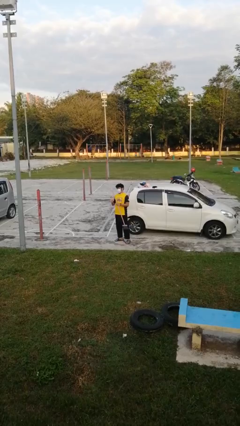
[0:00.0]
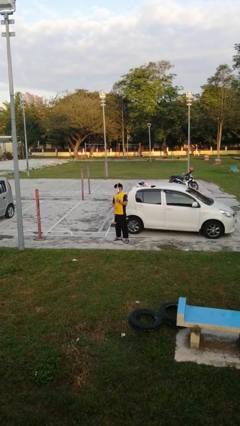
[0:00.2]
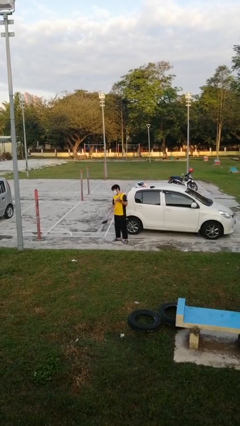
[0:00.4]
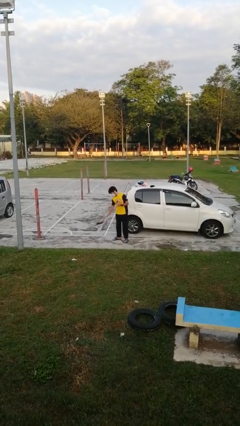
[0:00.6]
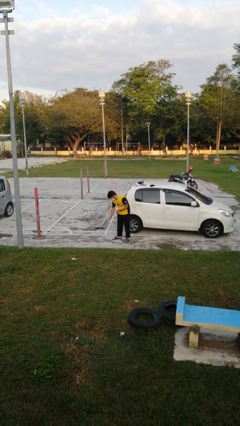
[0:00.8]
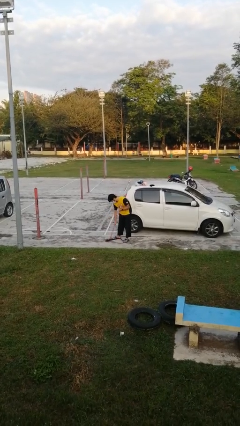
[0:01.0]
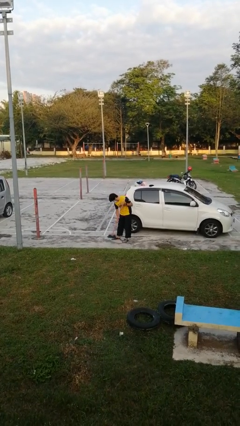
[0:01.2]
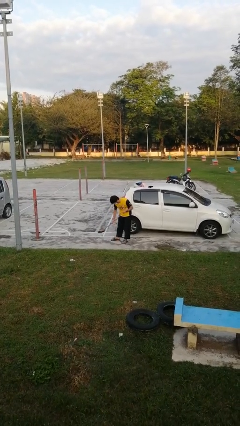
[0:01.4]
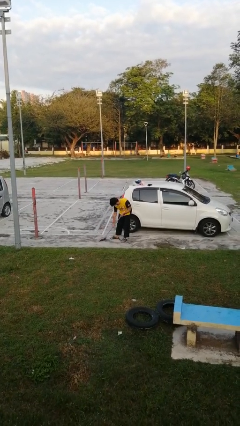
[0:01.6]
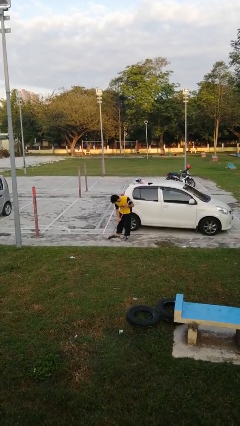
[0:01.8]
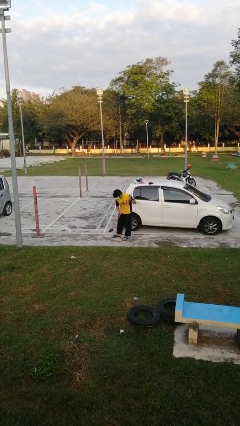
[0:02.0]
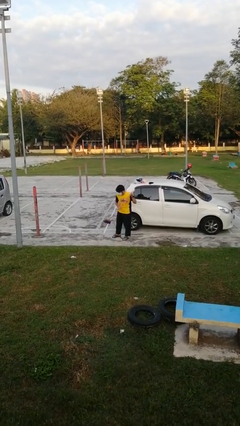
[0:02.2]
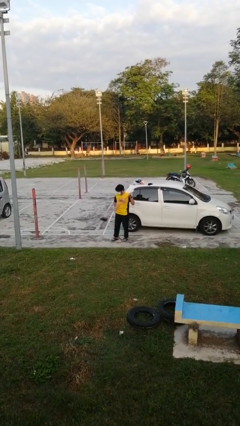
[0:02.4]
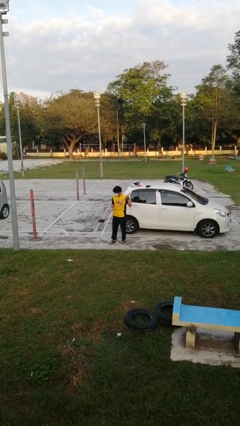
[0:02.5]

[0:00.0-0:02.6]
person sweeps floor

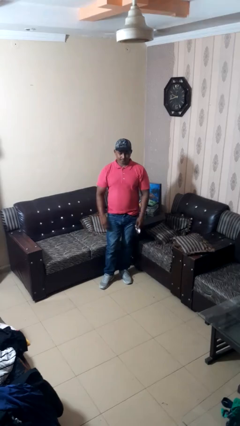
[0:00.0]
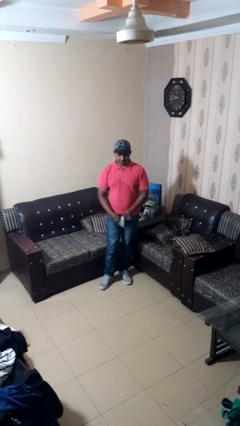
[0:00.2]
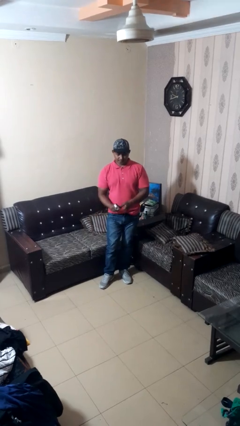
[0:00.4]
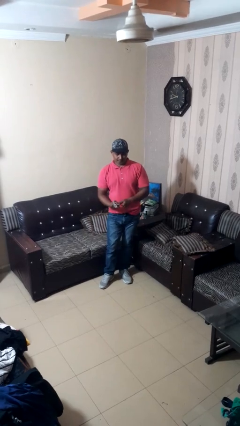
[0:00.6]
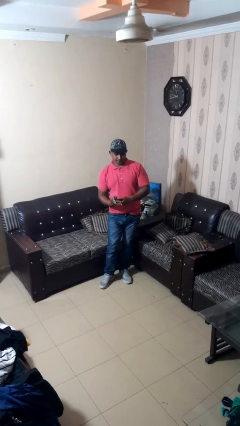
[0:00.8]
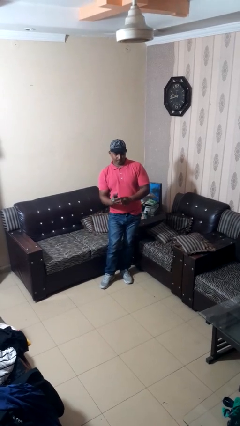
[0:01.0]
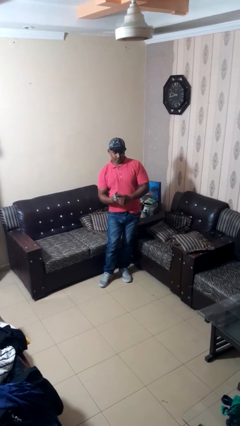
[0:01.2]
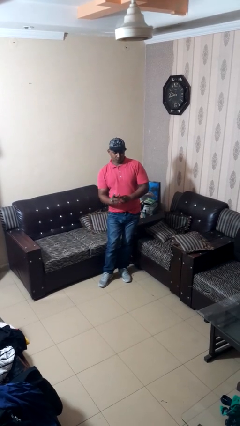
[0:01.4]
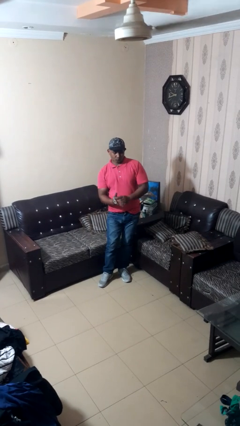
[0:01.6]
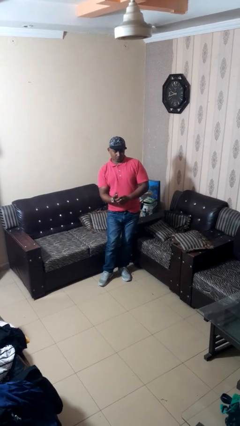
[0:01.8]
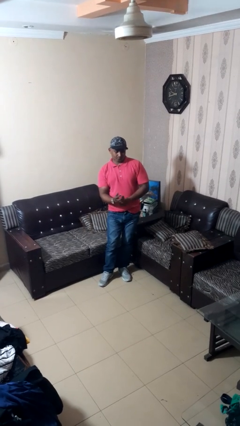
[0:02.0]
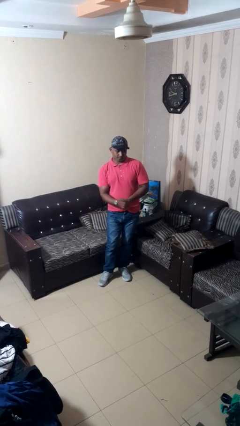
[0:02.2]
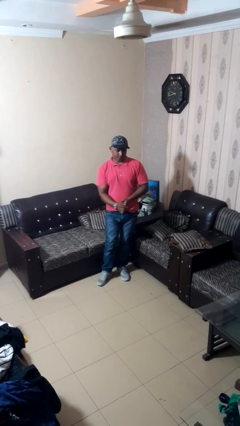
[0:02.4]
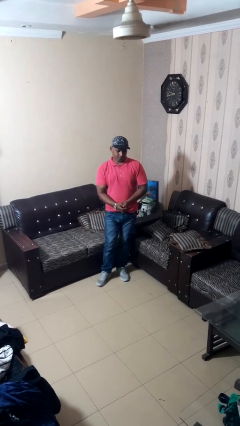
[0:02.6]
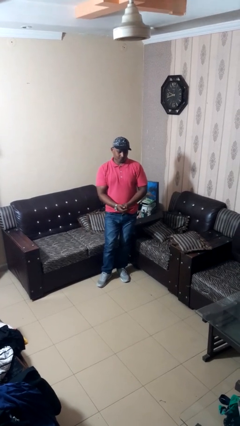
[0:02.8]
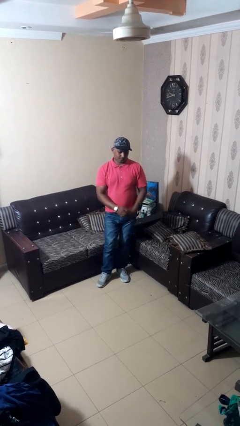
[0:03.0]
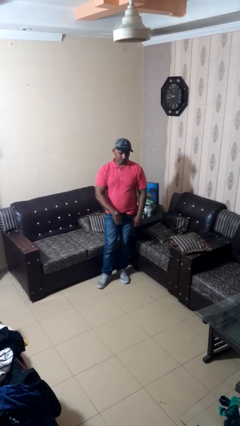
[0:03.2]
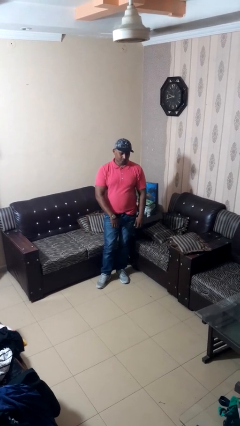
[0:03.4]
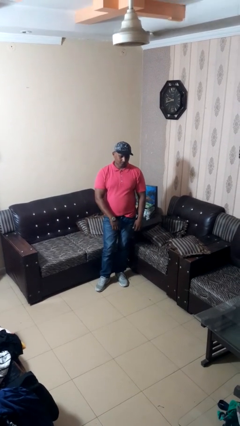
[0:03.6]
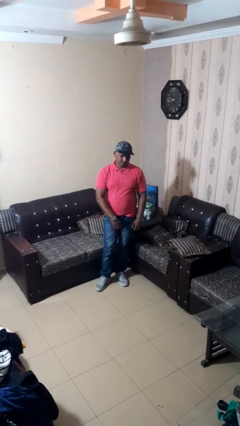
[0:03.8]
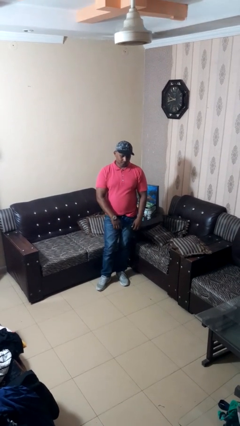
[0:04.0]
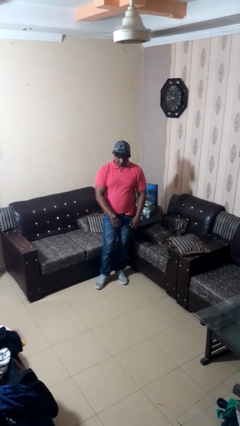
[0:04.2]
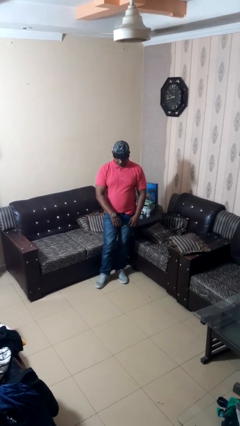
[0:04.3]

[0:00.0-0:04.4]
person puts on wristwatch

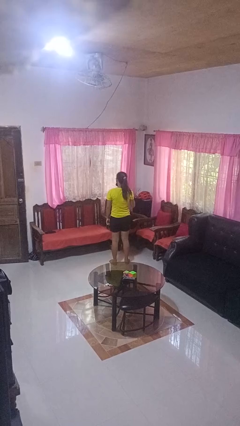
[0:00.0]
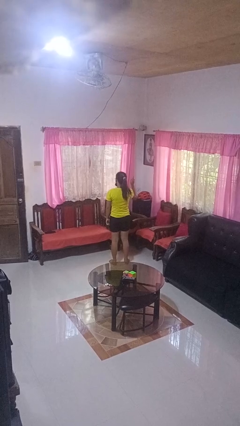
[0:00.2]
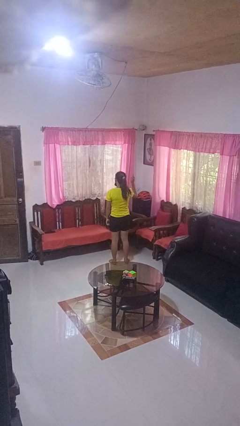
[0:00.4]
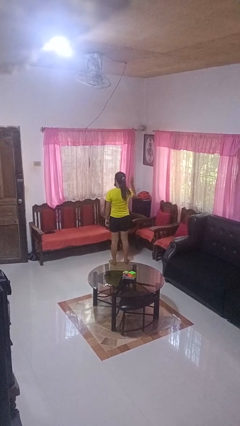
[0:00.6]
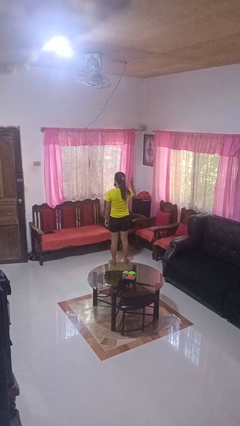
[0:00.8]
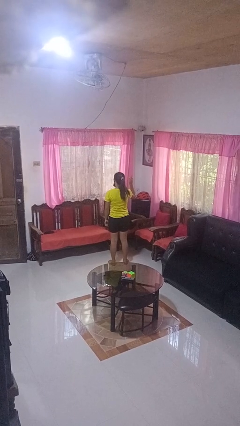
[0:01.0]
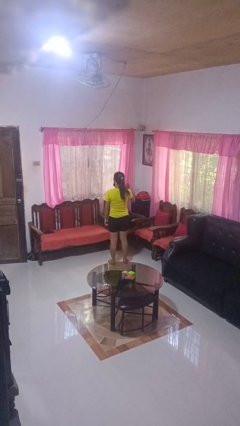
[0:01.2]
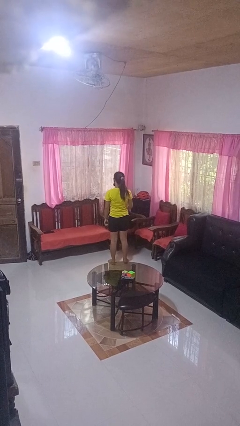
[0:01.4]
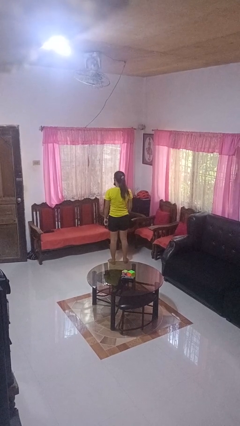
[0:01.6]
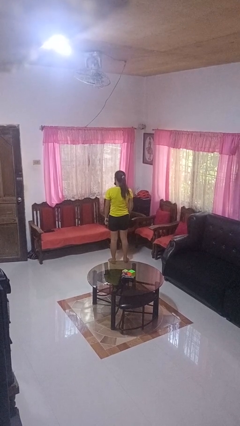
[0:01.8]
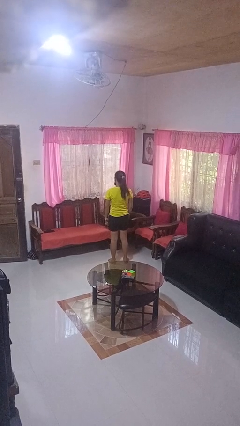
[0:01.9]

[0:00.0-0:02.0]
person gestures number one

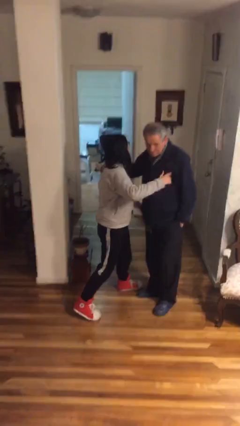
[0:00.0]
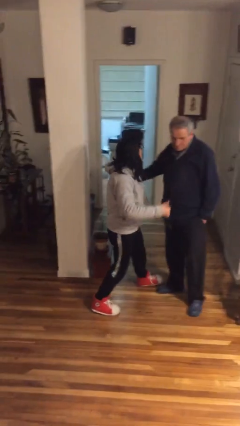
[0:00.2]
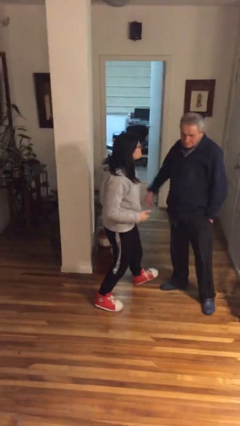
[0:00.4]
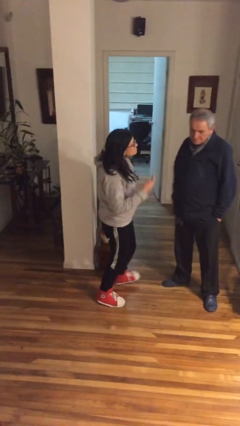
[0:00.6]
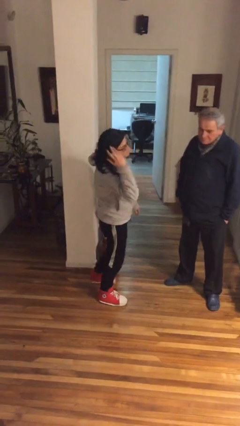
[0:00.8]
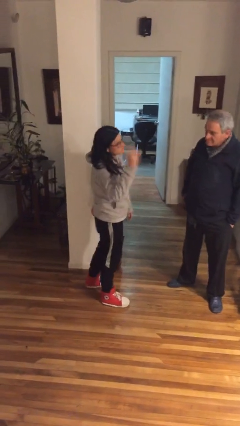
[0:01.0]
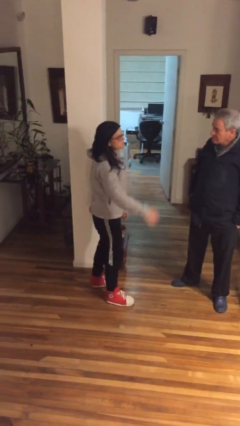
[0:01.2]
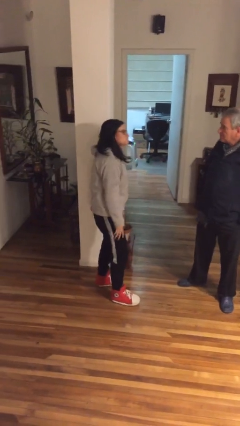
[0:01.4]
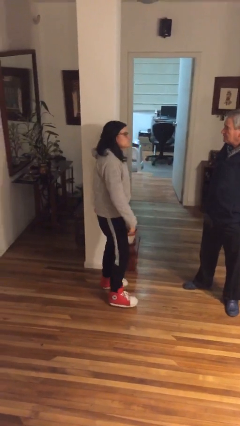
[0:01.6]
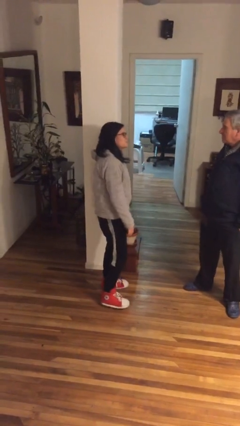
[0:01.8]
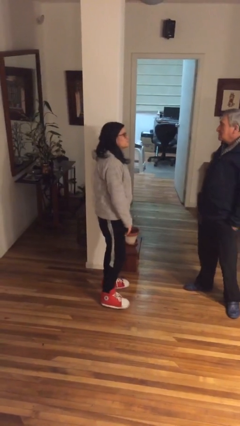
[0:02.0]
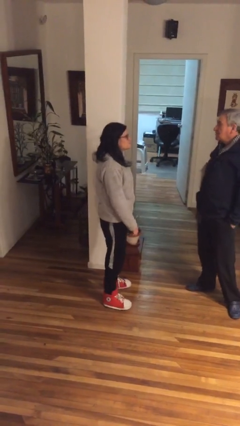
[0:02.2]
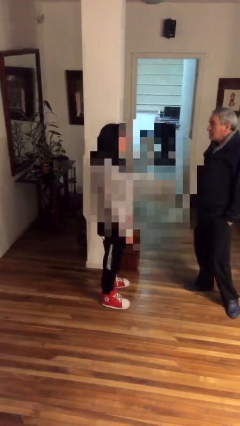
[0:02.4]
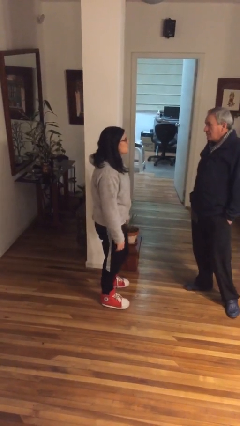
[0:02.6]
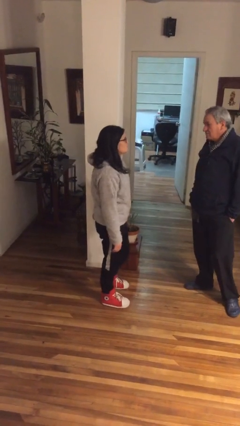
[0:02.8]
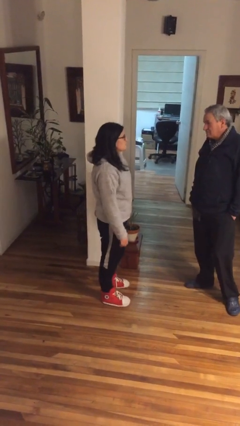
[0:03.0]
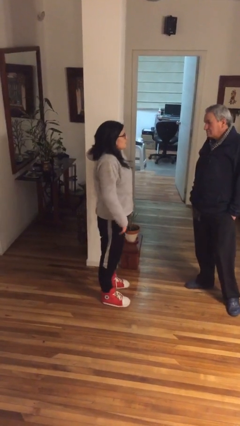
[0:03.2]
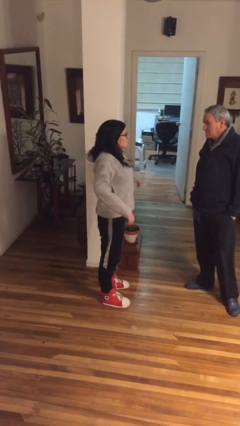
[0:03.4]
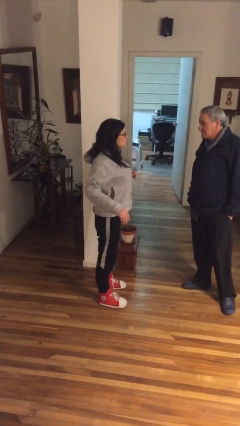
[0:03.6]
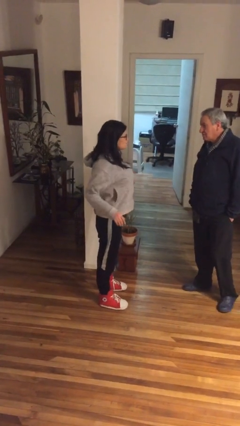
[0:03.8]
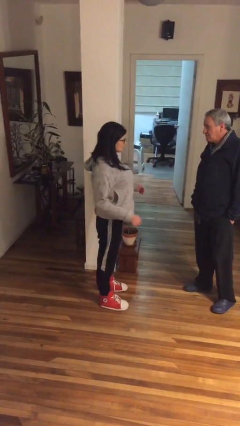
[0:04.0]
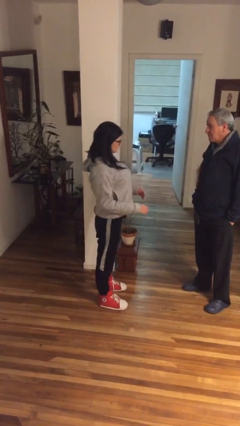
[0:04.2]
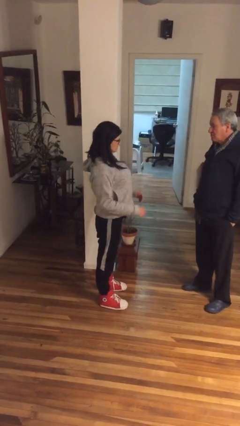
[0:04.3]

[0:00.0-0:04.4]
person talks to person

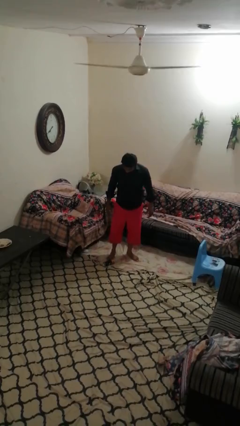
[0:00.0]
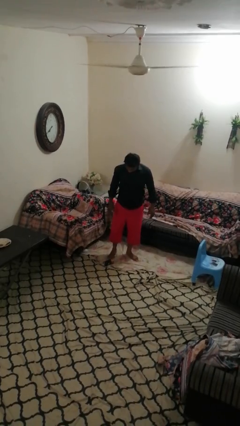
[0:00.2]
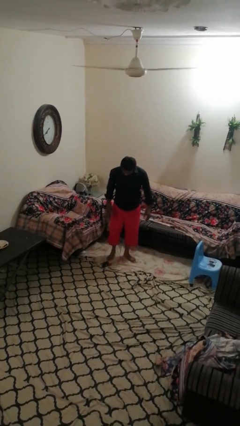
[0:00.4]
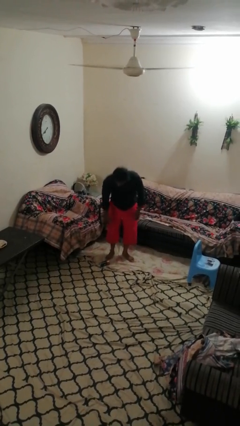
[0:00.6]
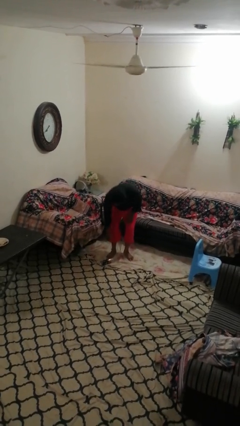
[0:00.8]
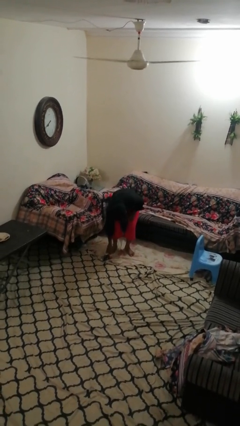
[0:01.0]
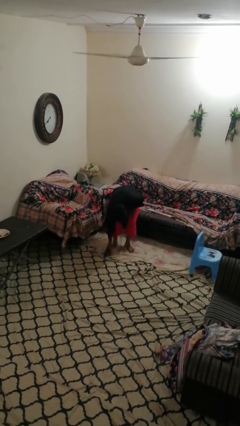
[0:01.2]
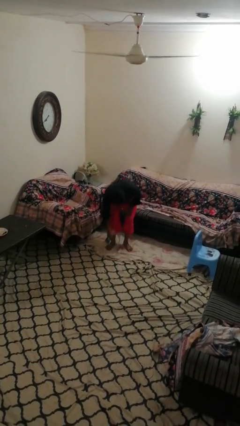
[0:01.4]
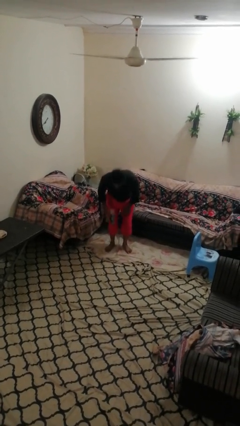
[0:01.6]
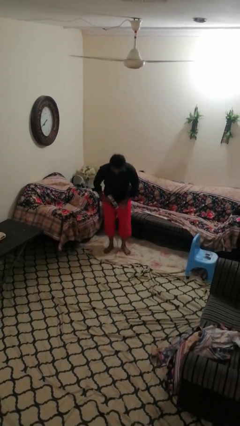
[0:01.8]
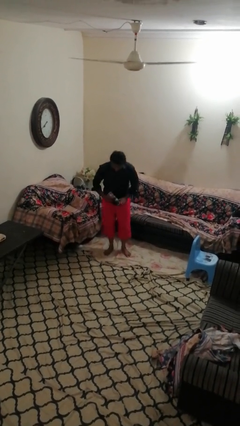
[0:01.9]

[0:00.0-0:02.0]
person picks up object from floor

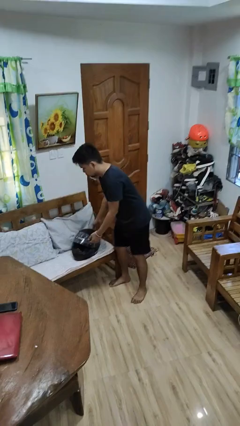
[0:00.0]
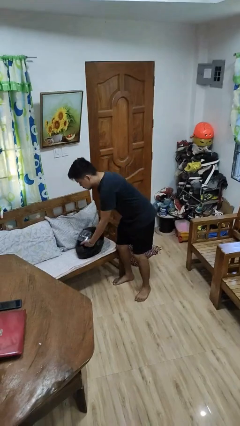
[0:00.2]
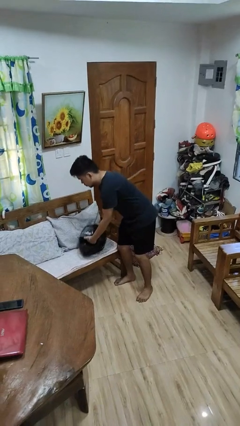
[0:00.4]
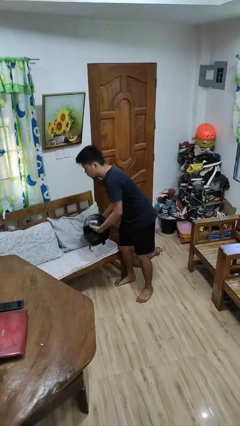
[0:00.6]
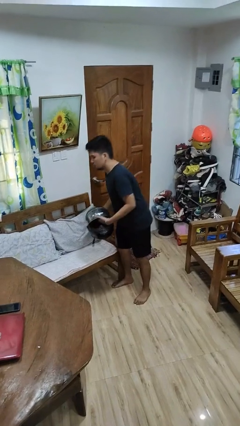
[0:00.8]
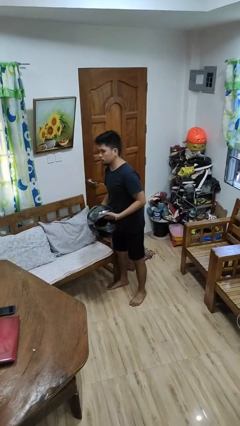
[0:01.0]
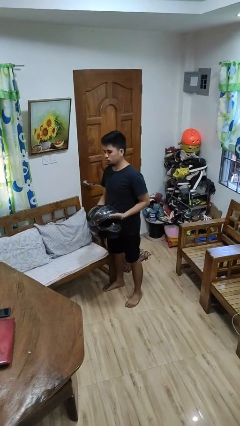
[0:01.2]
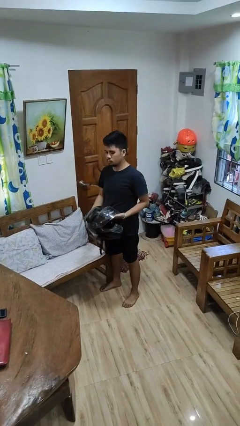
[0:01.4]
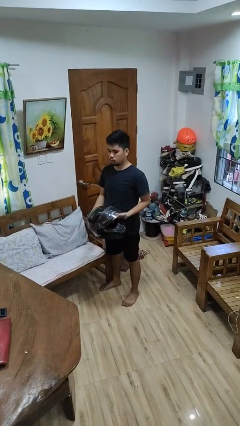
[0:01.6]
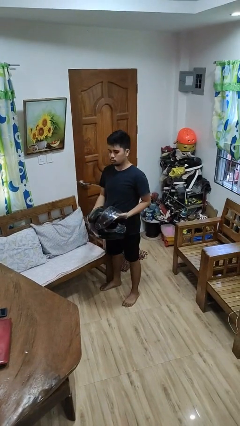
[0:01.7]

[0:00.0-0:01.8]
person picks up object from couch
